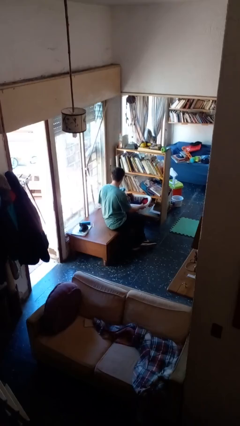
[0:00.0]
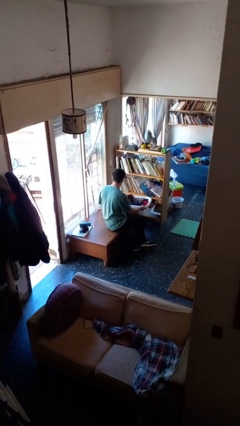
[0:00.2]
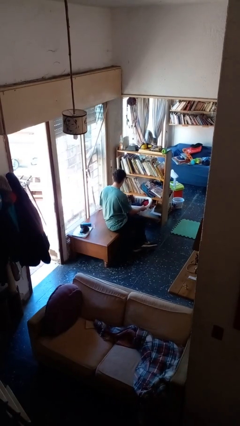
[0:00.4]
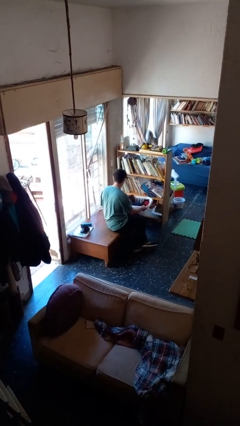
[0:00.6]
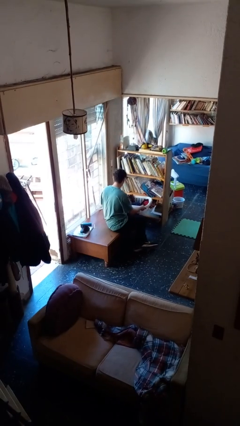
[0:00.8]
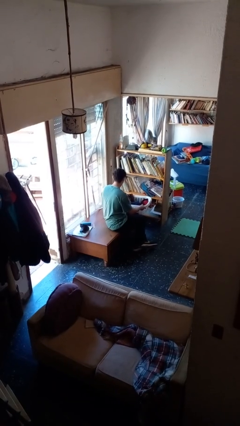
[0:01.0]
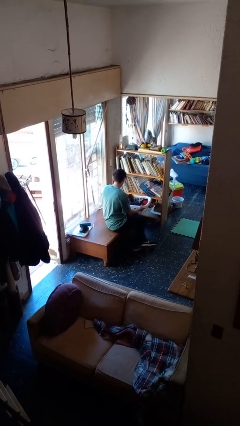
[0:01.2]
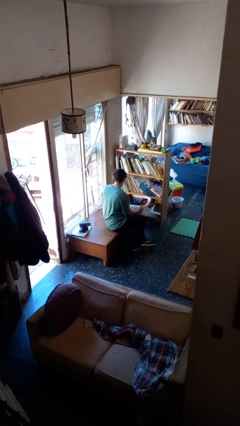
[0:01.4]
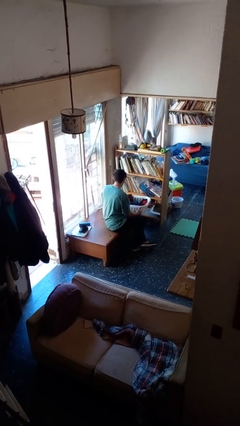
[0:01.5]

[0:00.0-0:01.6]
person puts object into basket

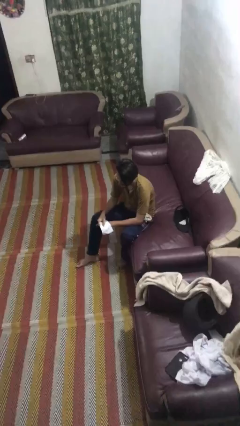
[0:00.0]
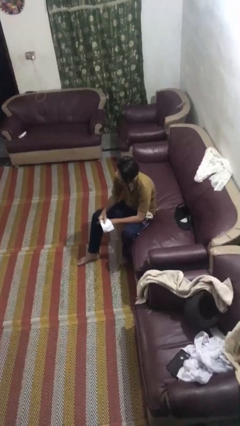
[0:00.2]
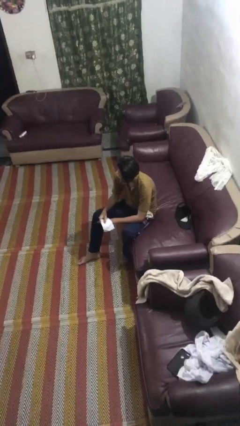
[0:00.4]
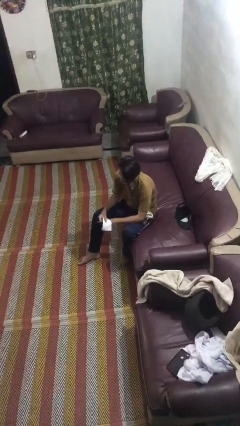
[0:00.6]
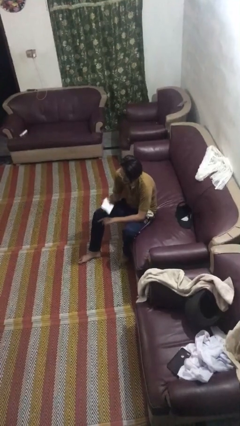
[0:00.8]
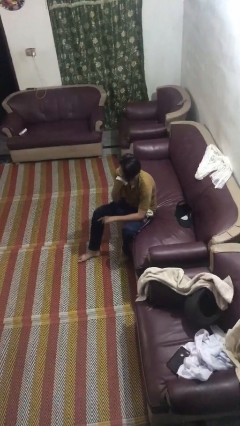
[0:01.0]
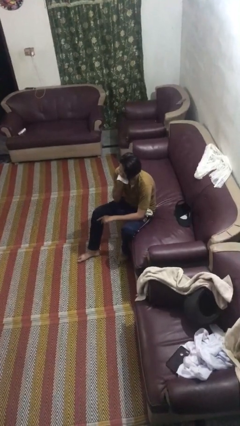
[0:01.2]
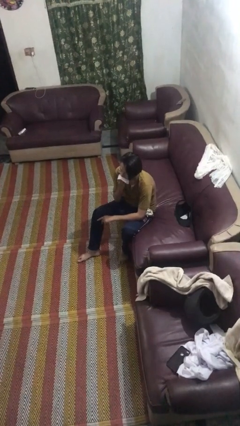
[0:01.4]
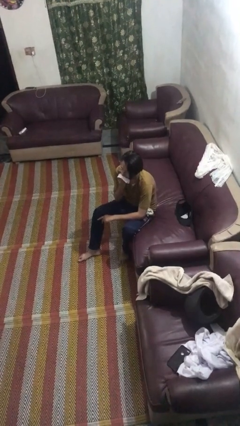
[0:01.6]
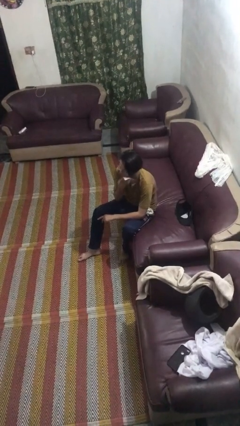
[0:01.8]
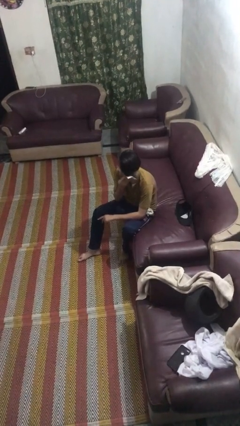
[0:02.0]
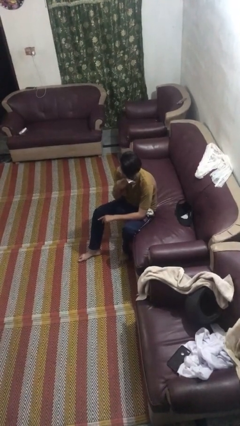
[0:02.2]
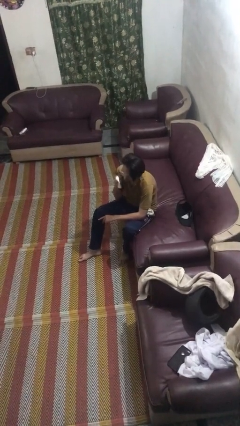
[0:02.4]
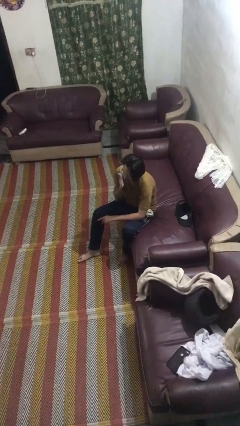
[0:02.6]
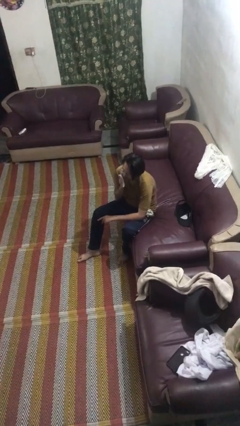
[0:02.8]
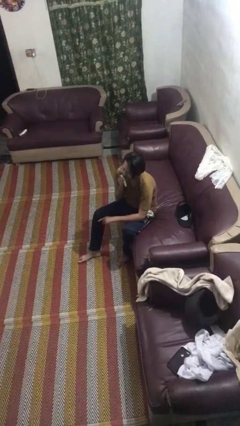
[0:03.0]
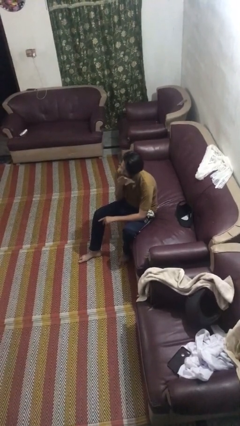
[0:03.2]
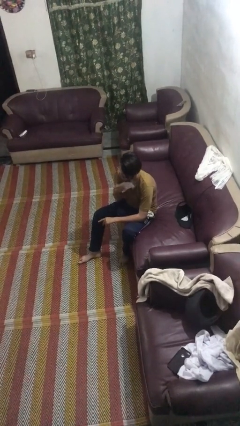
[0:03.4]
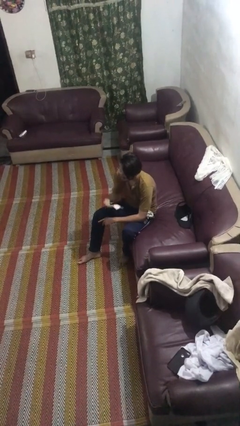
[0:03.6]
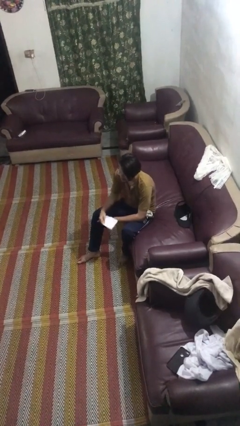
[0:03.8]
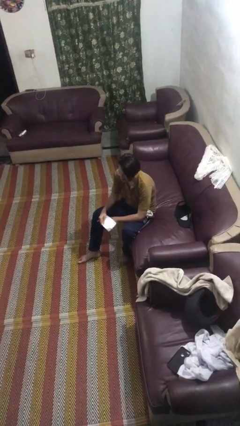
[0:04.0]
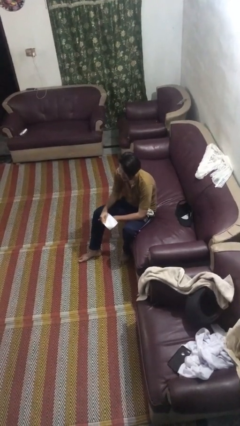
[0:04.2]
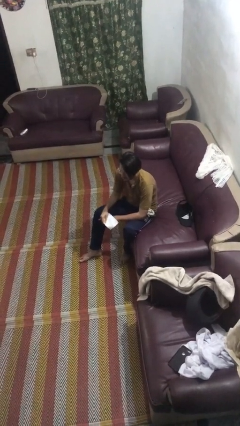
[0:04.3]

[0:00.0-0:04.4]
person wipes mouth with napkin

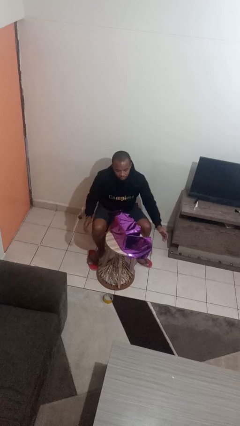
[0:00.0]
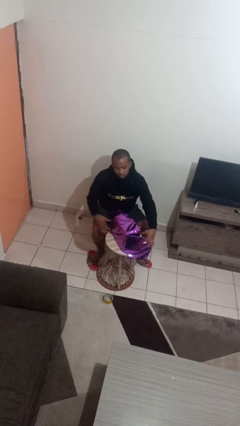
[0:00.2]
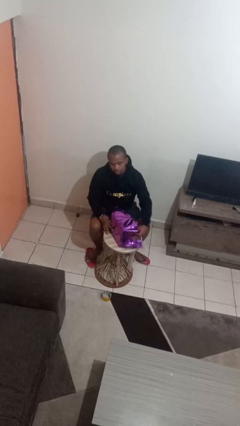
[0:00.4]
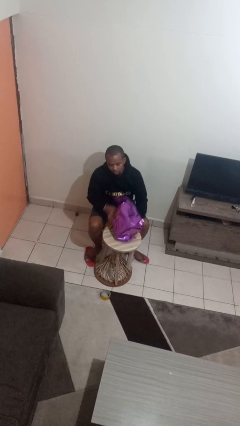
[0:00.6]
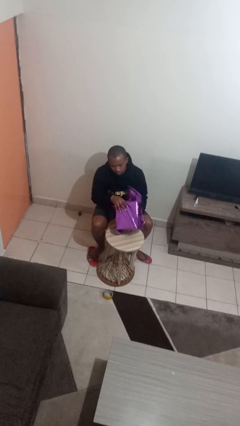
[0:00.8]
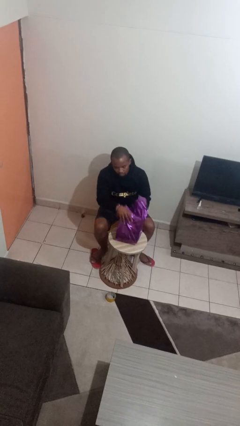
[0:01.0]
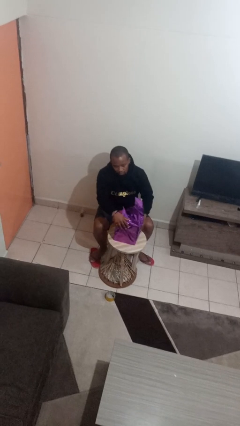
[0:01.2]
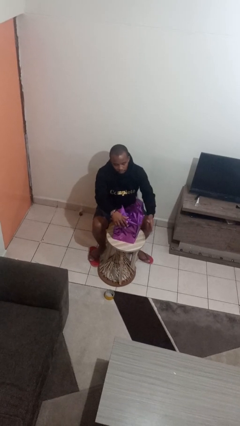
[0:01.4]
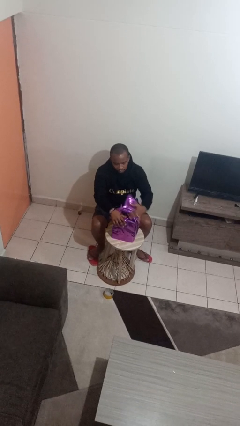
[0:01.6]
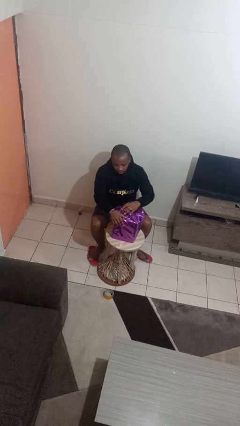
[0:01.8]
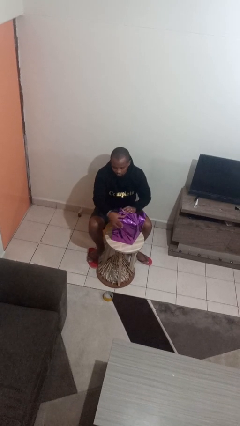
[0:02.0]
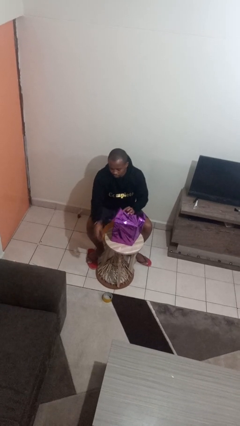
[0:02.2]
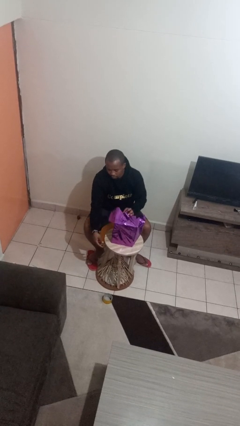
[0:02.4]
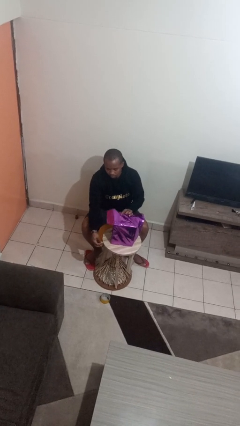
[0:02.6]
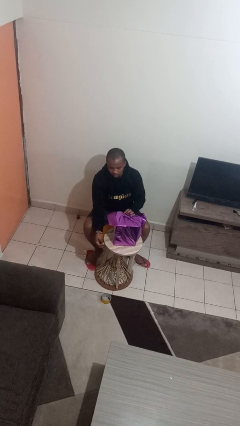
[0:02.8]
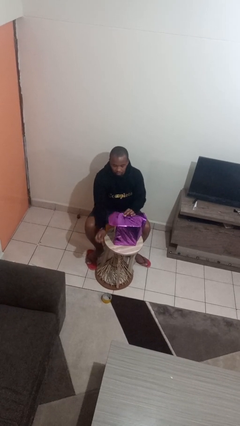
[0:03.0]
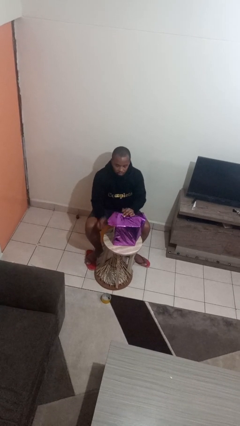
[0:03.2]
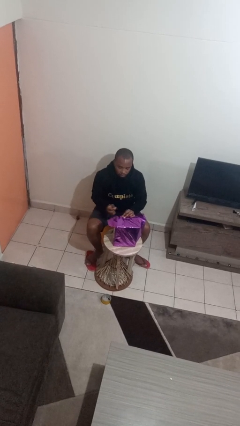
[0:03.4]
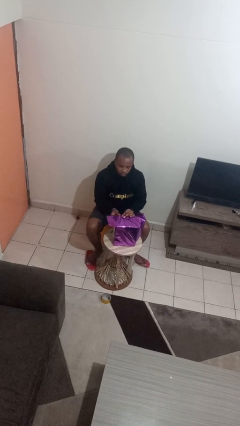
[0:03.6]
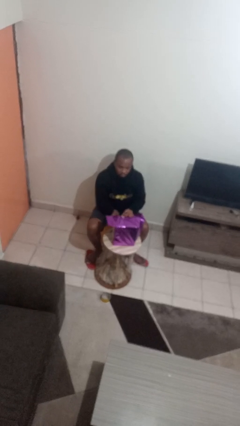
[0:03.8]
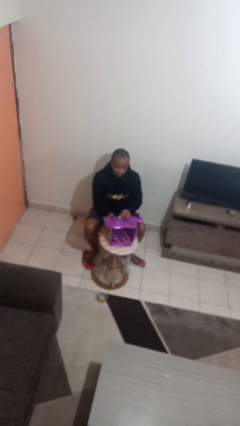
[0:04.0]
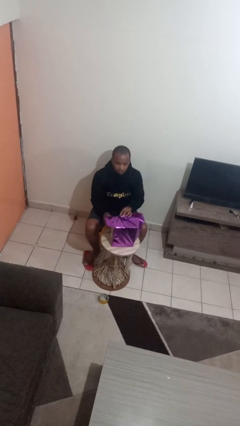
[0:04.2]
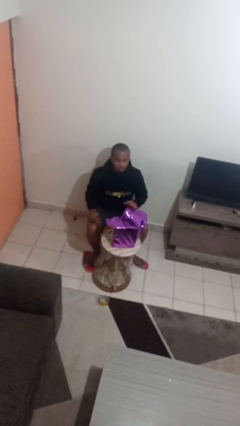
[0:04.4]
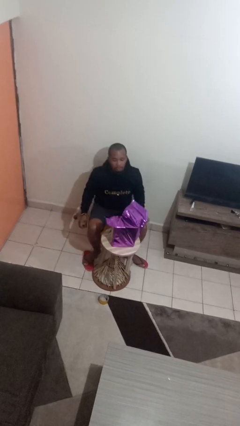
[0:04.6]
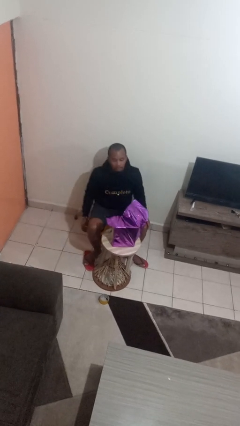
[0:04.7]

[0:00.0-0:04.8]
person wraps box

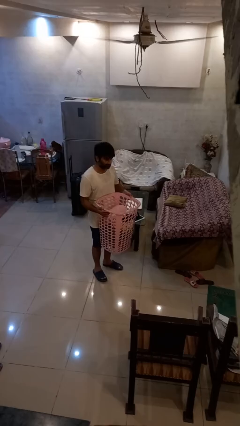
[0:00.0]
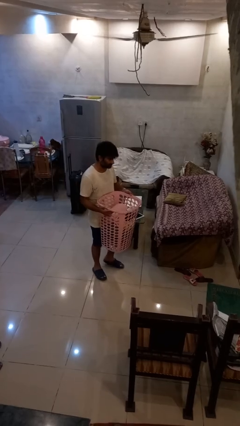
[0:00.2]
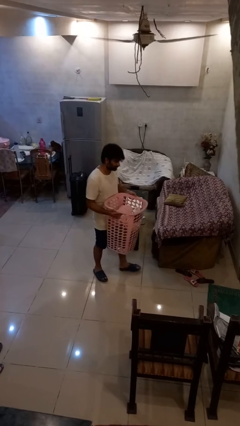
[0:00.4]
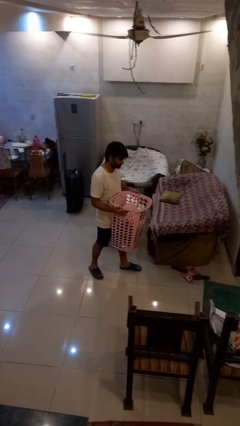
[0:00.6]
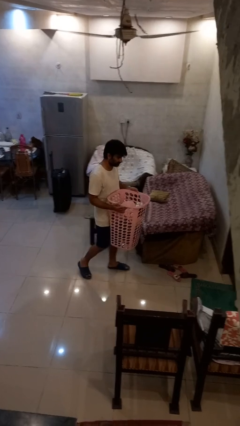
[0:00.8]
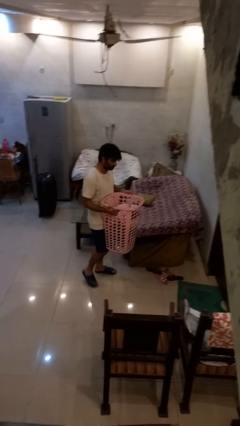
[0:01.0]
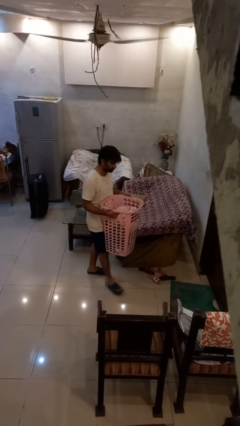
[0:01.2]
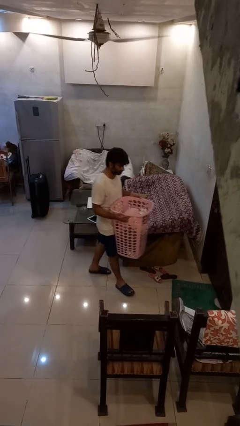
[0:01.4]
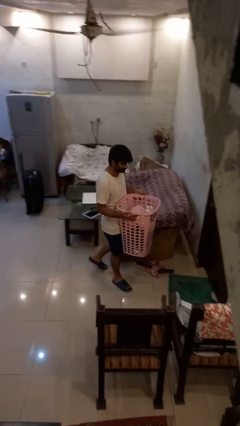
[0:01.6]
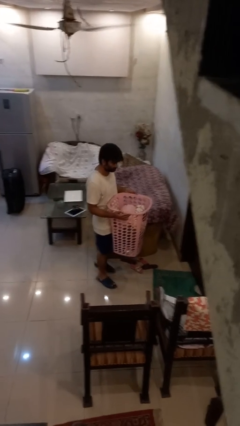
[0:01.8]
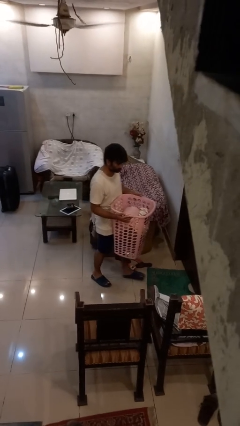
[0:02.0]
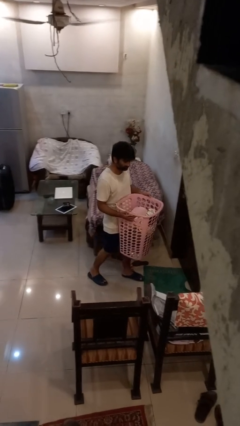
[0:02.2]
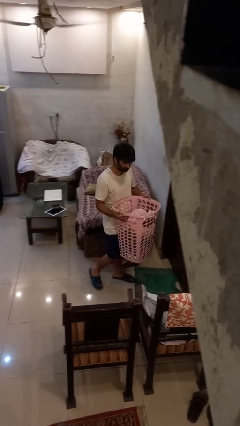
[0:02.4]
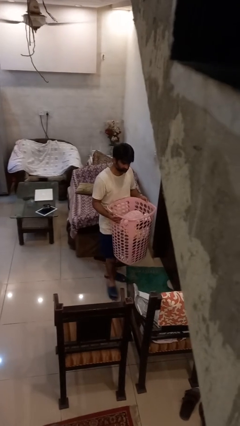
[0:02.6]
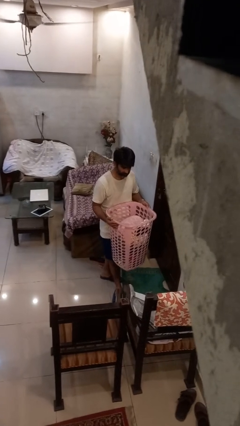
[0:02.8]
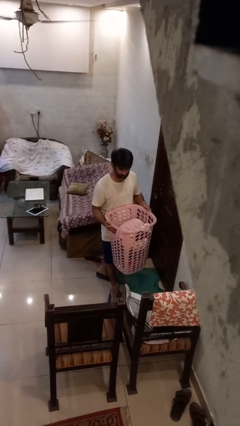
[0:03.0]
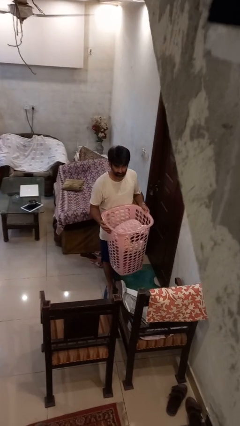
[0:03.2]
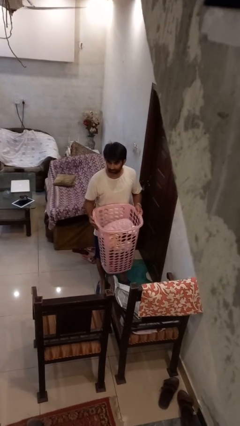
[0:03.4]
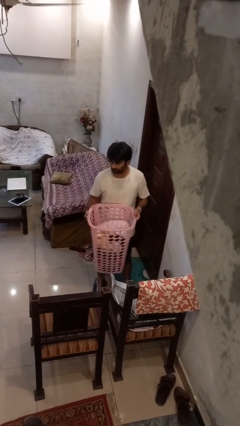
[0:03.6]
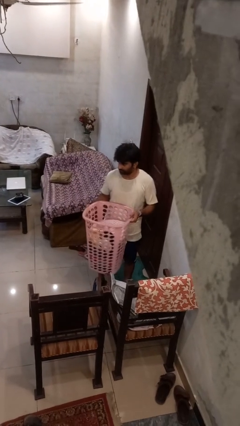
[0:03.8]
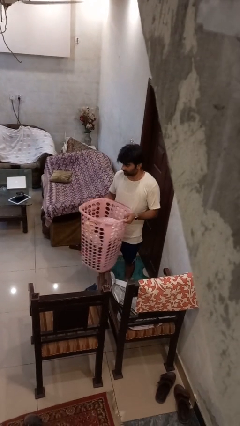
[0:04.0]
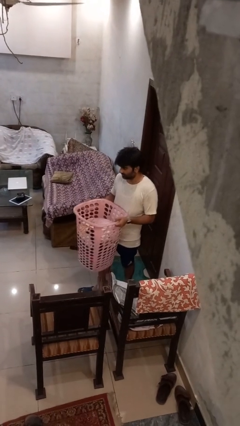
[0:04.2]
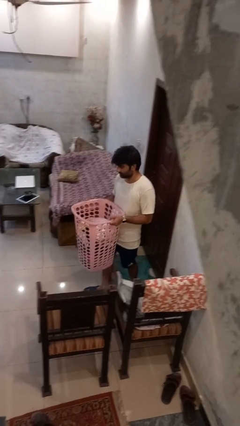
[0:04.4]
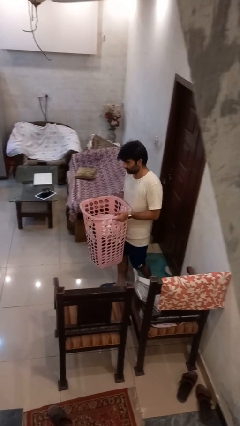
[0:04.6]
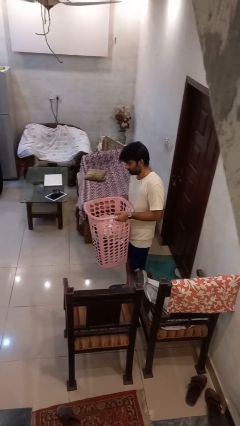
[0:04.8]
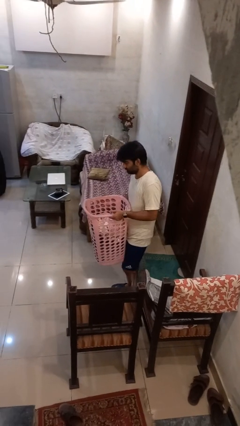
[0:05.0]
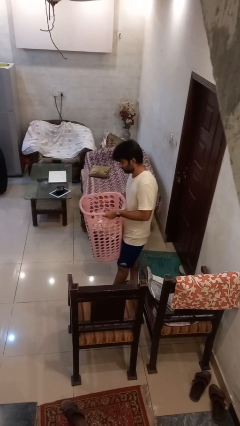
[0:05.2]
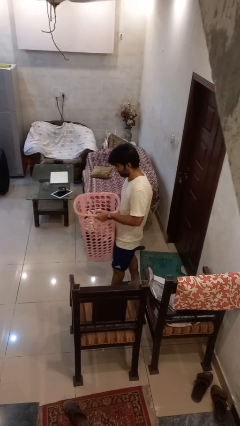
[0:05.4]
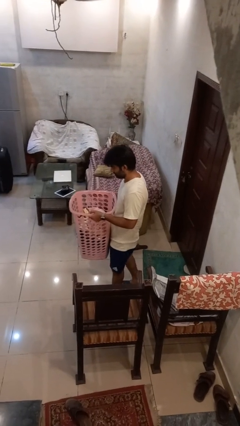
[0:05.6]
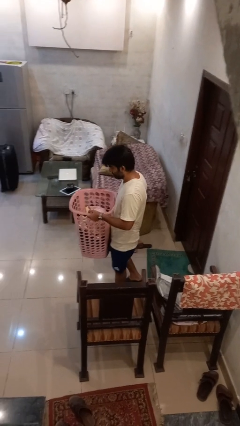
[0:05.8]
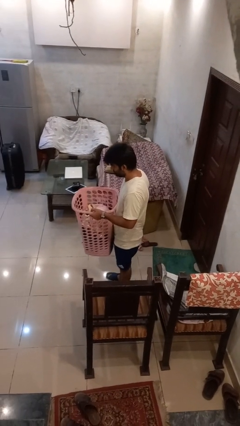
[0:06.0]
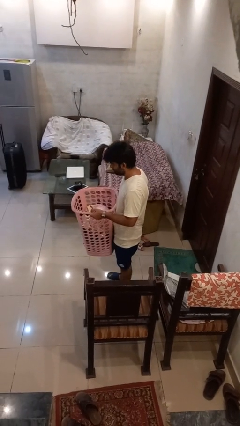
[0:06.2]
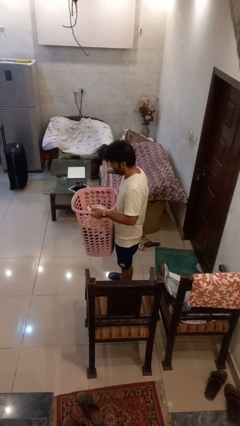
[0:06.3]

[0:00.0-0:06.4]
person carries laundry basket

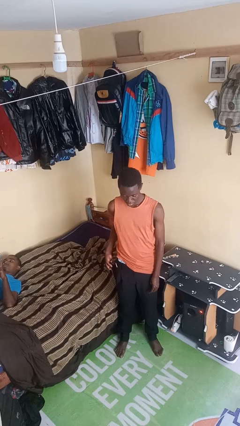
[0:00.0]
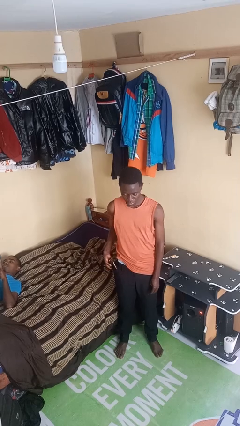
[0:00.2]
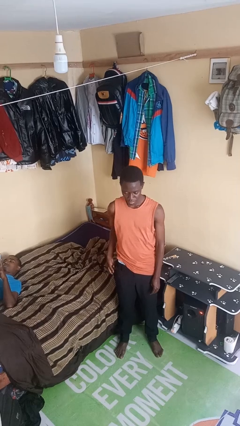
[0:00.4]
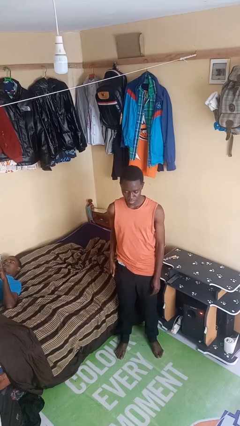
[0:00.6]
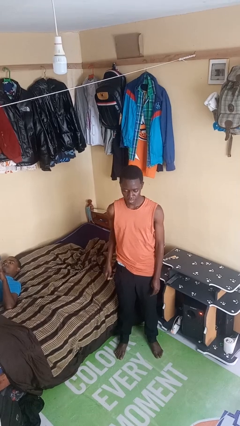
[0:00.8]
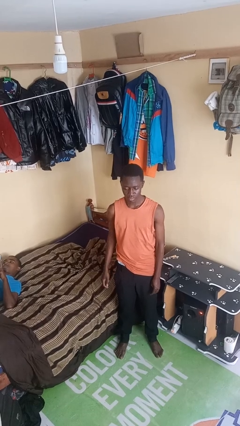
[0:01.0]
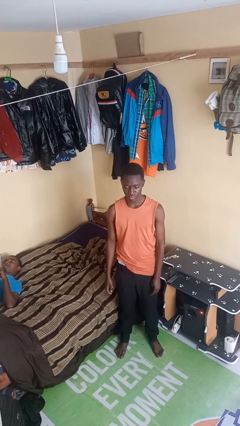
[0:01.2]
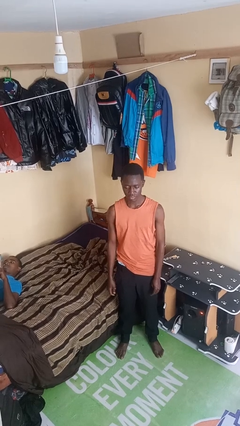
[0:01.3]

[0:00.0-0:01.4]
person puts phone into pocket
